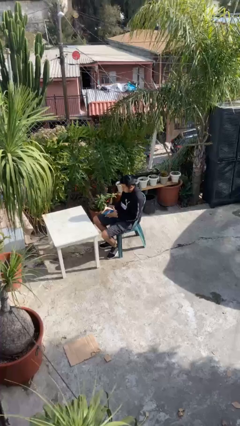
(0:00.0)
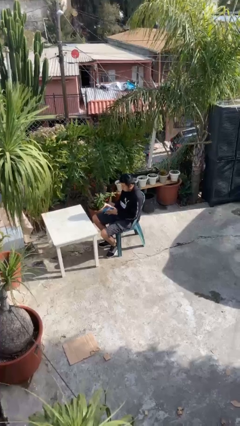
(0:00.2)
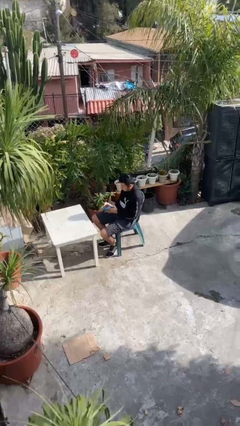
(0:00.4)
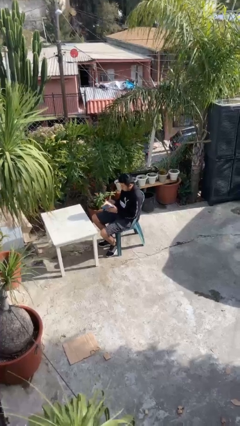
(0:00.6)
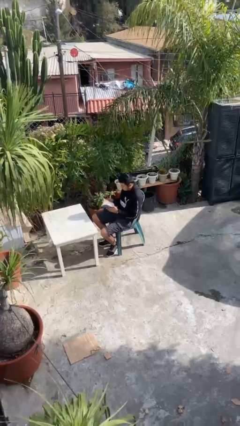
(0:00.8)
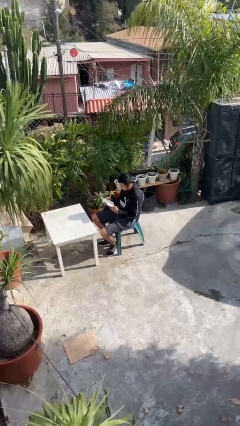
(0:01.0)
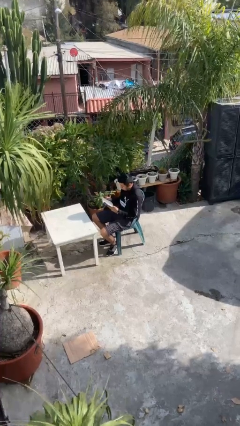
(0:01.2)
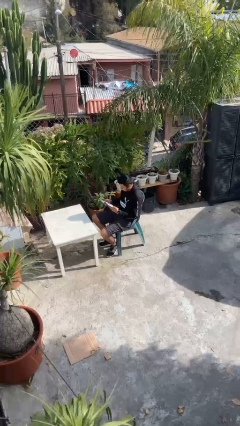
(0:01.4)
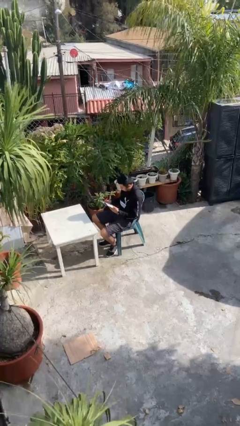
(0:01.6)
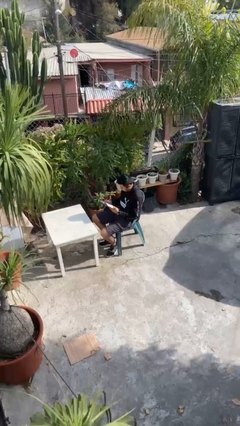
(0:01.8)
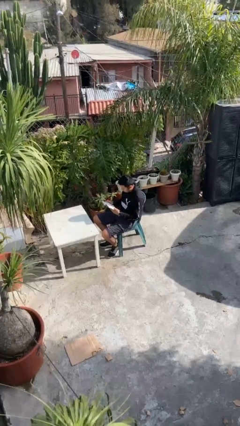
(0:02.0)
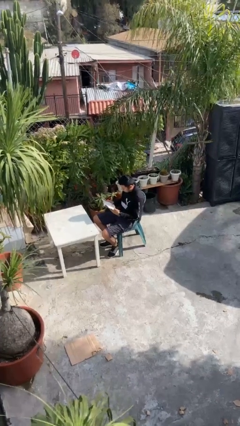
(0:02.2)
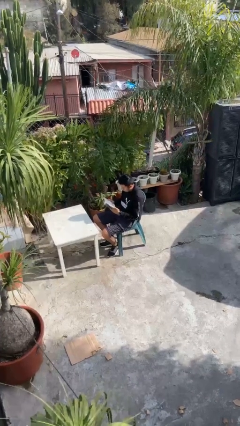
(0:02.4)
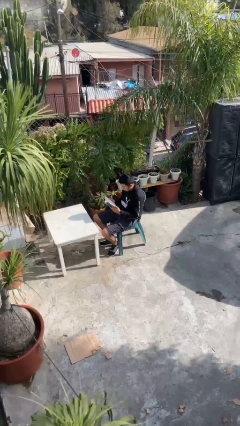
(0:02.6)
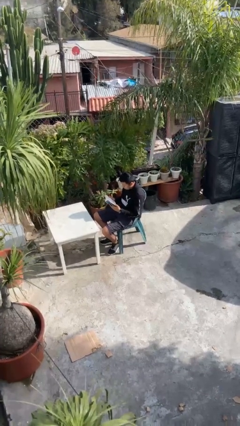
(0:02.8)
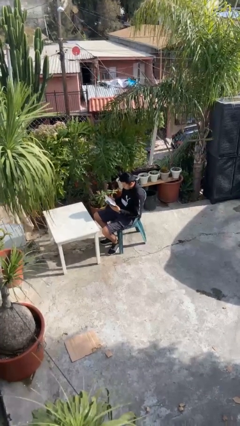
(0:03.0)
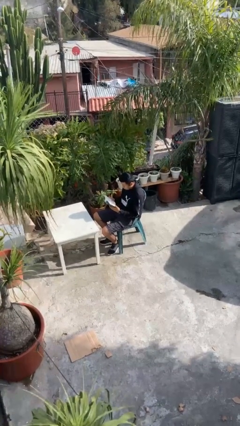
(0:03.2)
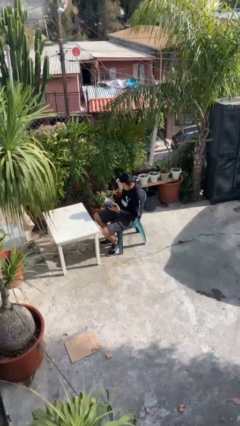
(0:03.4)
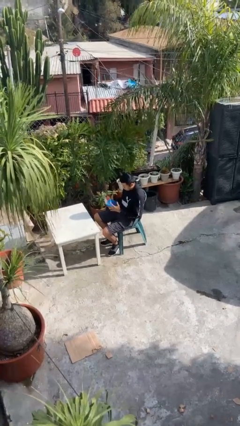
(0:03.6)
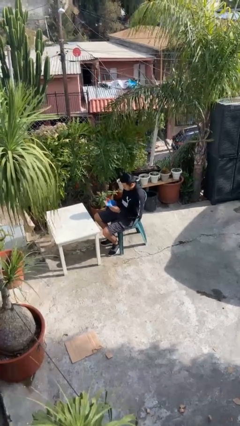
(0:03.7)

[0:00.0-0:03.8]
person reads document

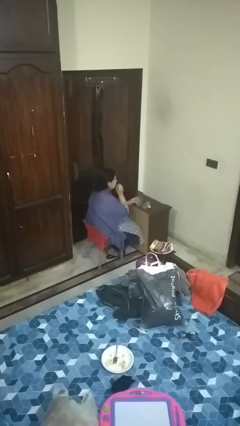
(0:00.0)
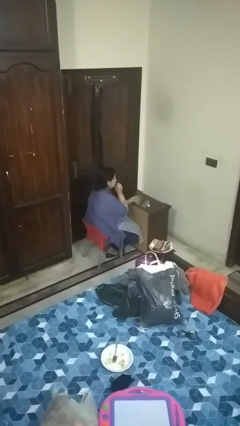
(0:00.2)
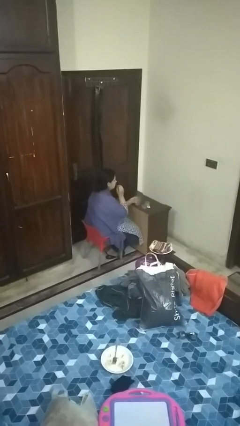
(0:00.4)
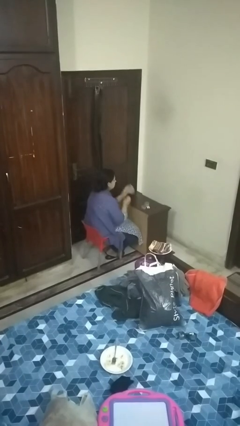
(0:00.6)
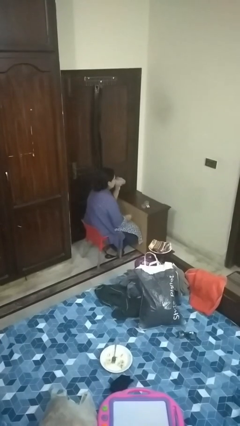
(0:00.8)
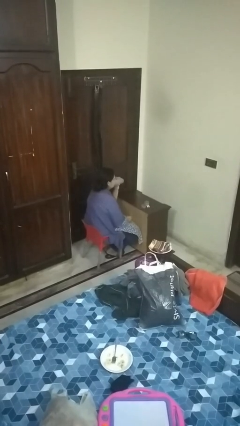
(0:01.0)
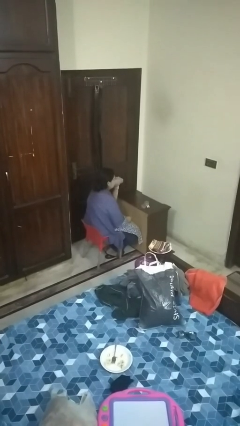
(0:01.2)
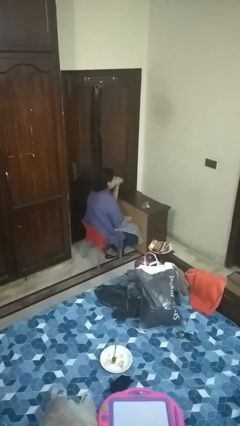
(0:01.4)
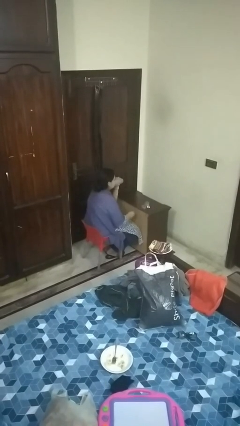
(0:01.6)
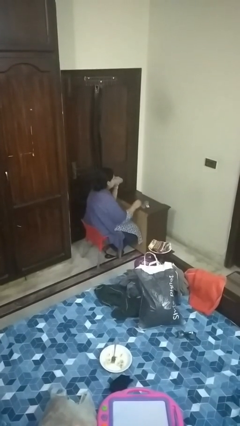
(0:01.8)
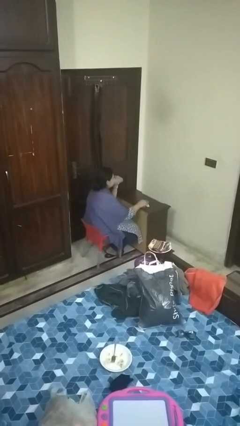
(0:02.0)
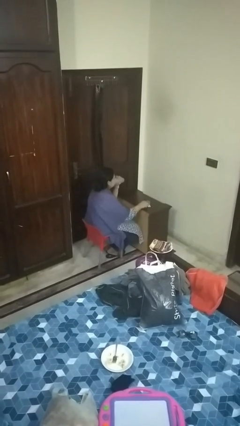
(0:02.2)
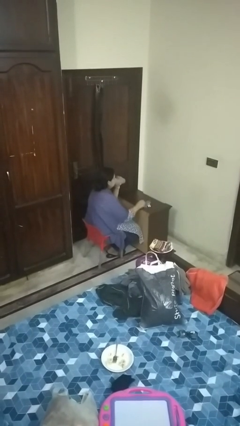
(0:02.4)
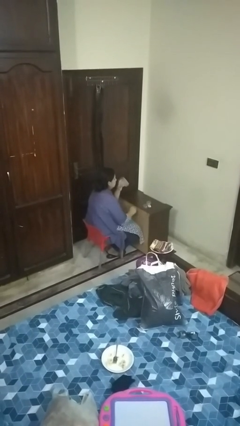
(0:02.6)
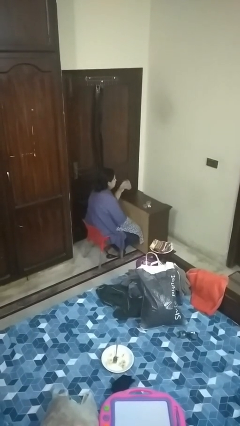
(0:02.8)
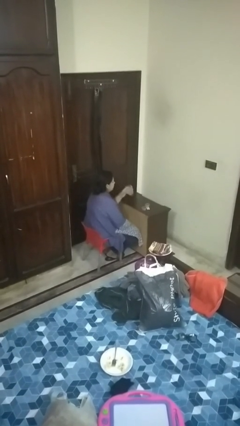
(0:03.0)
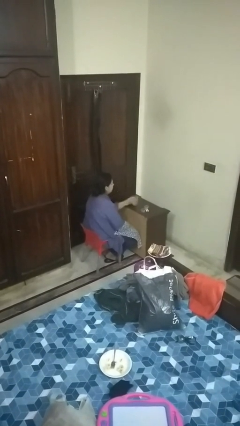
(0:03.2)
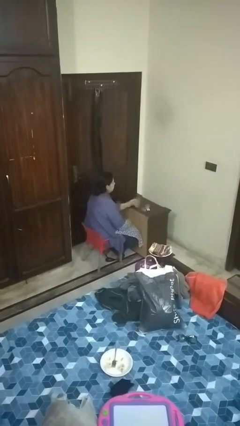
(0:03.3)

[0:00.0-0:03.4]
person drinks from cup

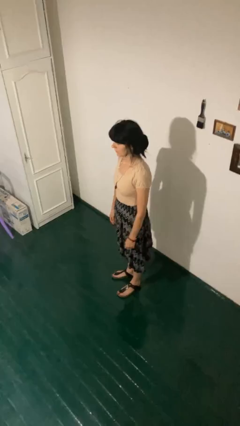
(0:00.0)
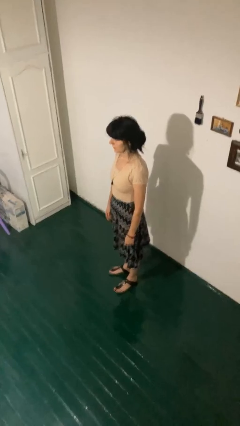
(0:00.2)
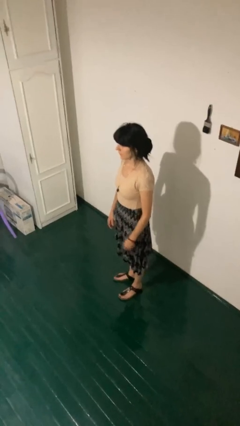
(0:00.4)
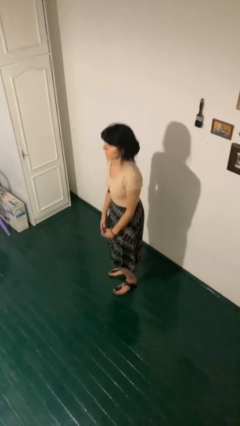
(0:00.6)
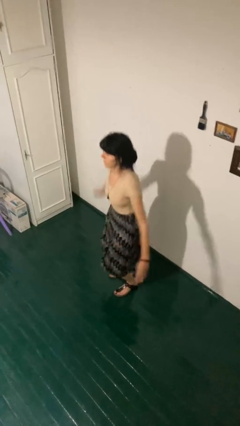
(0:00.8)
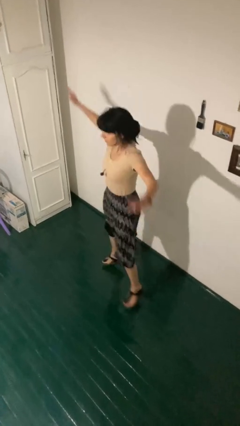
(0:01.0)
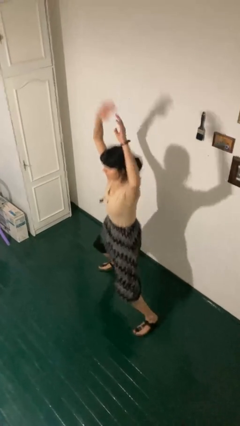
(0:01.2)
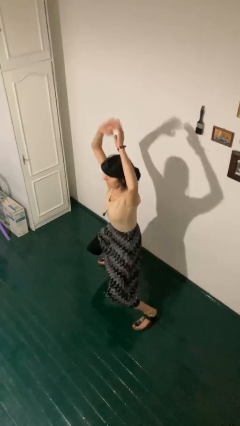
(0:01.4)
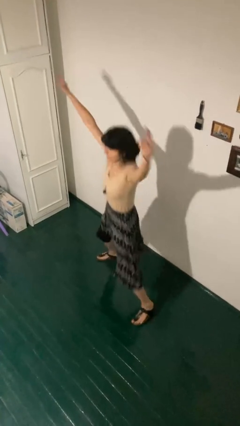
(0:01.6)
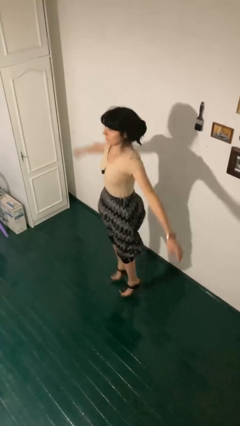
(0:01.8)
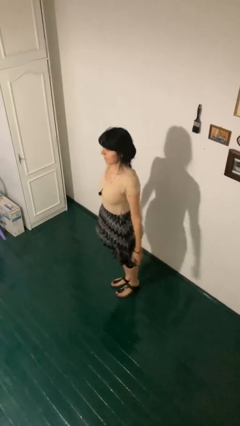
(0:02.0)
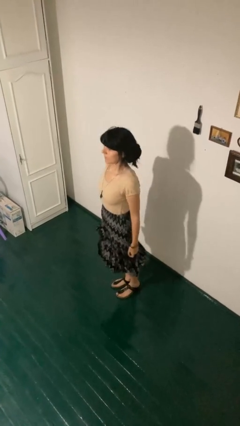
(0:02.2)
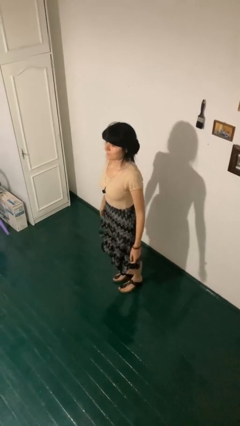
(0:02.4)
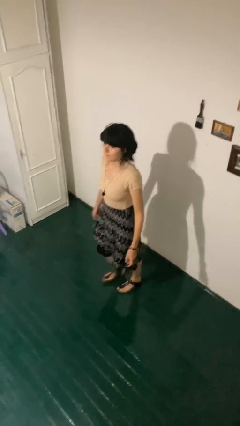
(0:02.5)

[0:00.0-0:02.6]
person exercises with jumping jacks

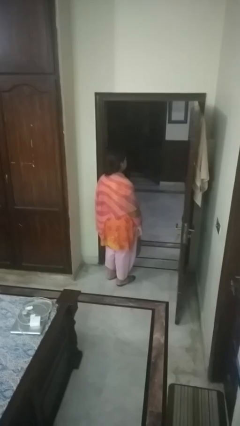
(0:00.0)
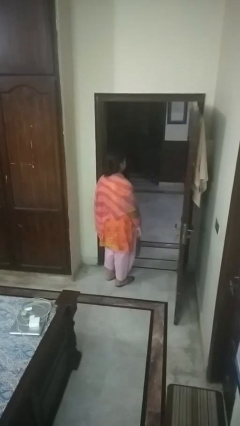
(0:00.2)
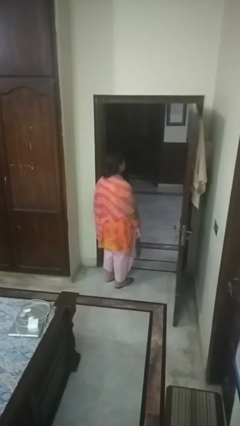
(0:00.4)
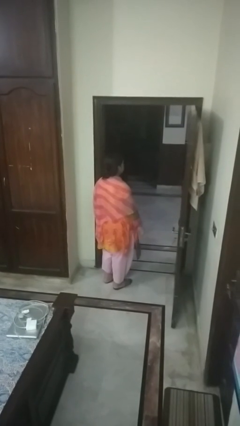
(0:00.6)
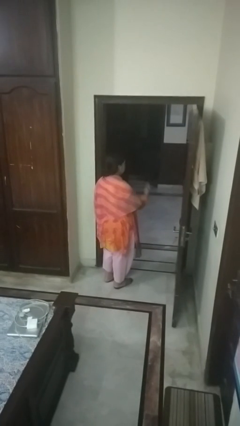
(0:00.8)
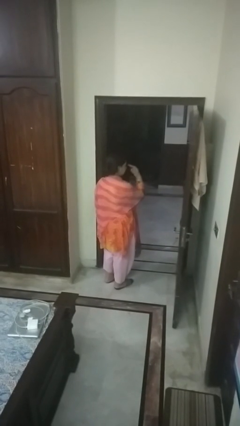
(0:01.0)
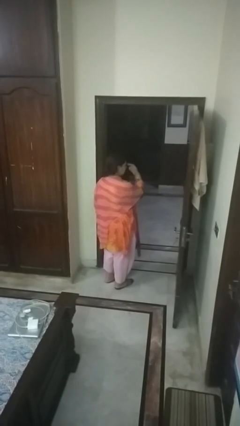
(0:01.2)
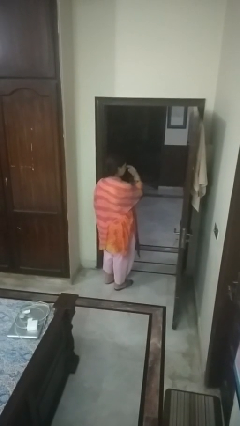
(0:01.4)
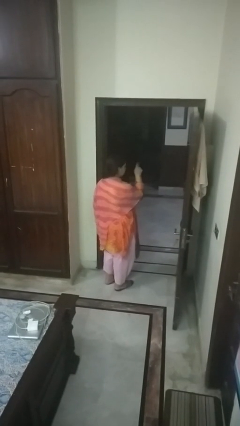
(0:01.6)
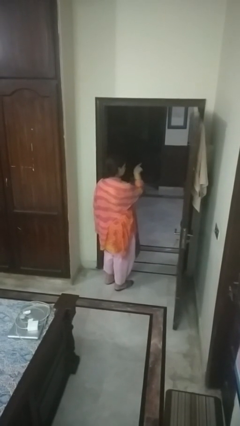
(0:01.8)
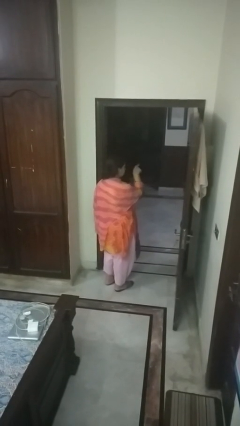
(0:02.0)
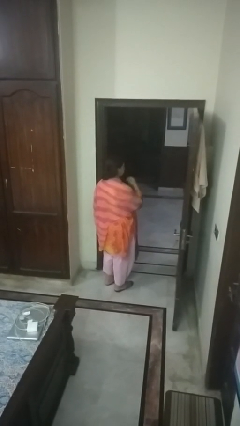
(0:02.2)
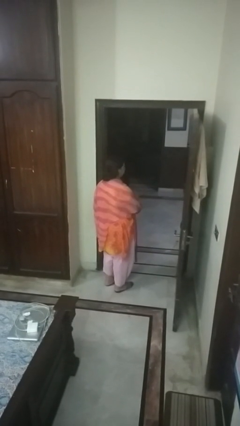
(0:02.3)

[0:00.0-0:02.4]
person gestures watch closely

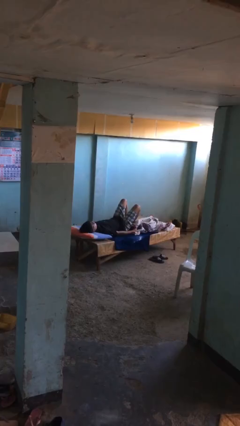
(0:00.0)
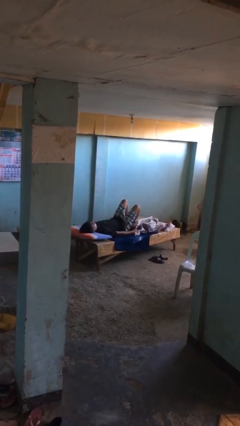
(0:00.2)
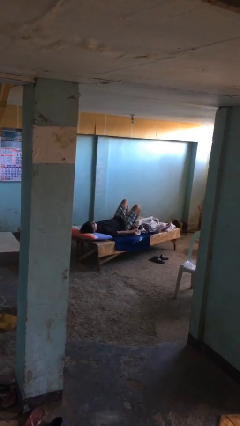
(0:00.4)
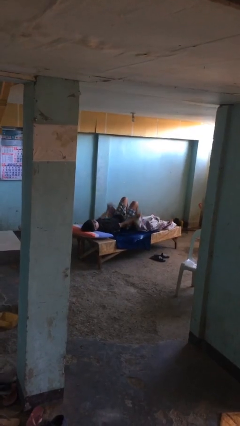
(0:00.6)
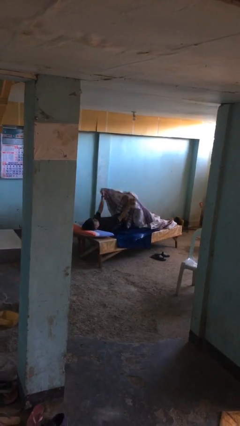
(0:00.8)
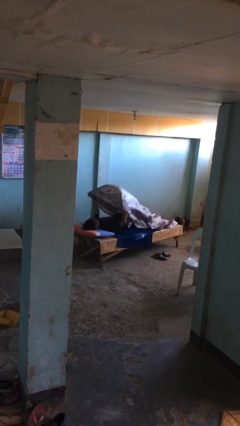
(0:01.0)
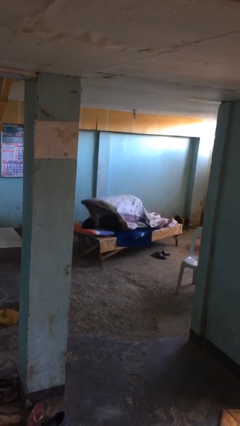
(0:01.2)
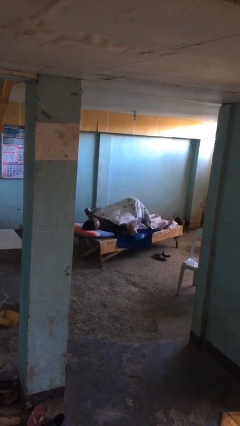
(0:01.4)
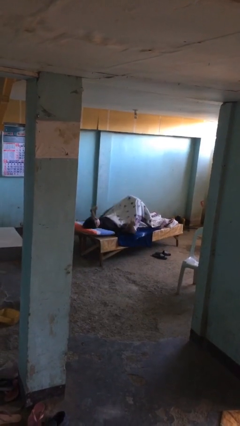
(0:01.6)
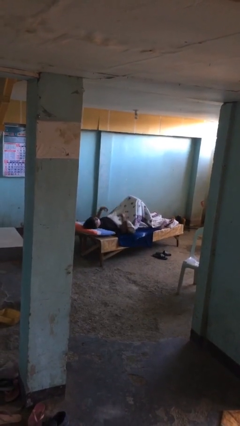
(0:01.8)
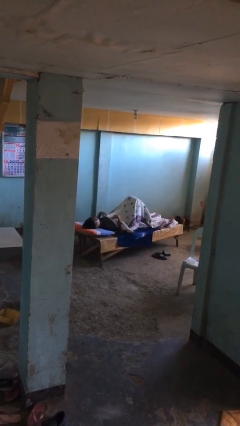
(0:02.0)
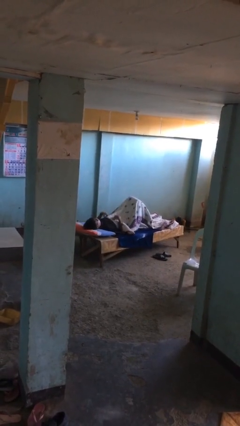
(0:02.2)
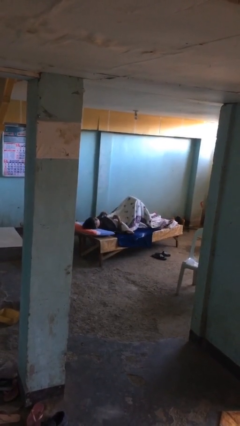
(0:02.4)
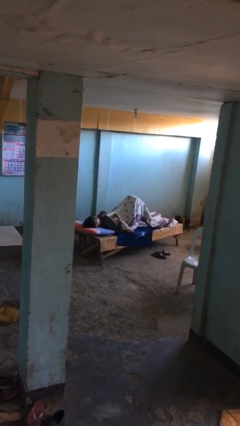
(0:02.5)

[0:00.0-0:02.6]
person covers with bedsheets

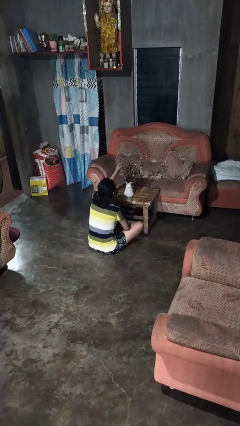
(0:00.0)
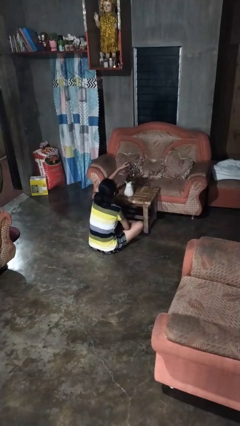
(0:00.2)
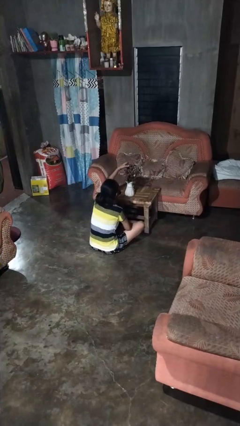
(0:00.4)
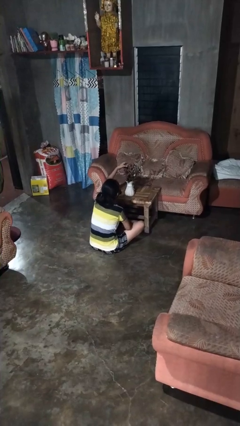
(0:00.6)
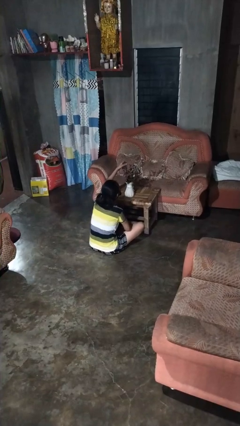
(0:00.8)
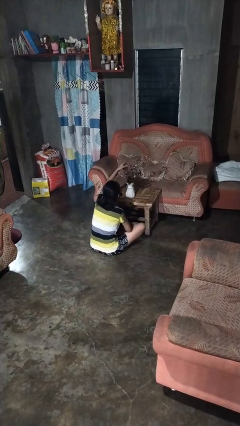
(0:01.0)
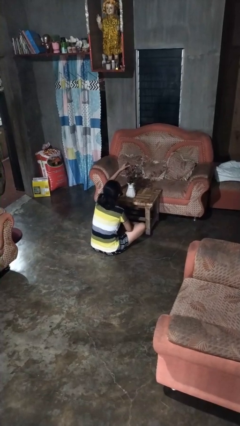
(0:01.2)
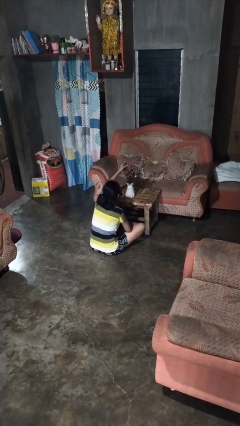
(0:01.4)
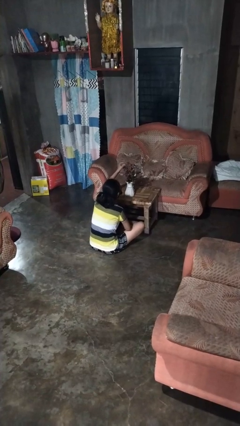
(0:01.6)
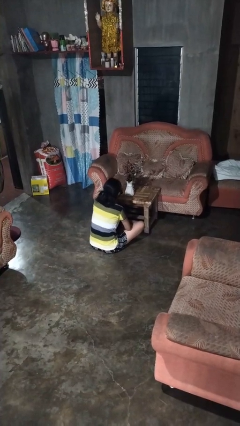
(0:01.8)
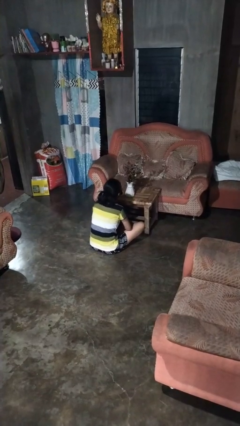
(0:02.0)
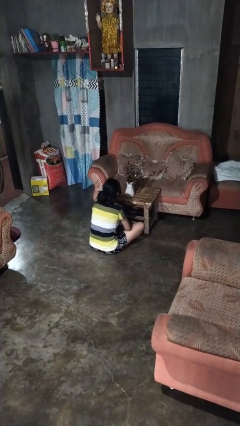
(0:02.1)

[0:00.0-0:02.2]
person arranges flowers in vase

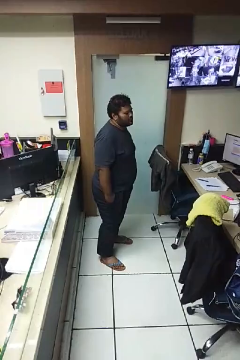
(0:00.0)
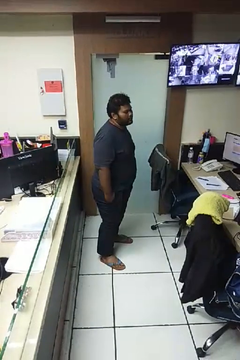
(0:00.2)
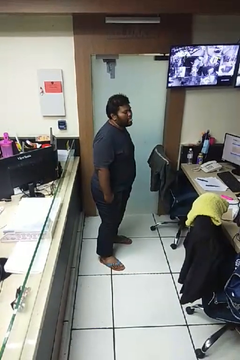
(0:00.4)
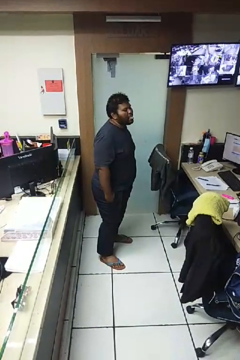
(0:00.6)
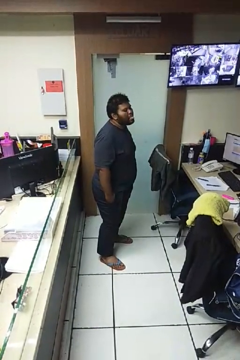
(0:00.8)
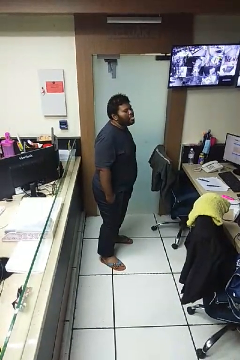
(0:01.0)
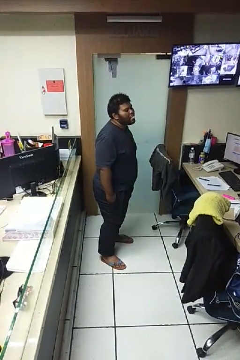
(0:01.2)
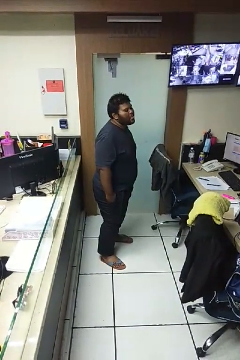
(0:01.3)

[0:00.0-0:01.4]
person sticks out tongue
